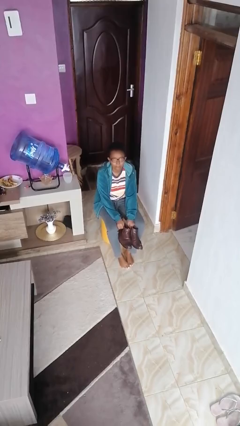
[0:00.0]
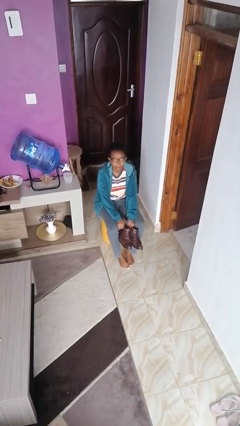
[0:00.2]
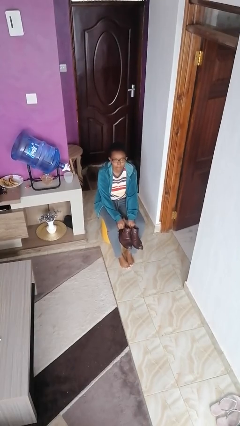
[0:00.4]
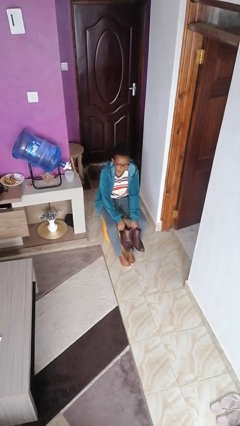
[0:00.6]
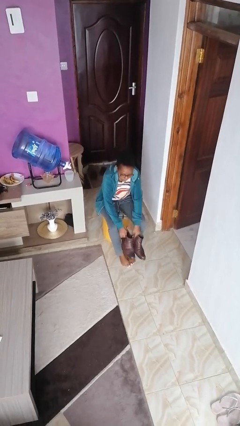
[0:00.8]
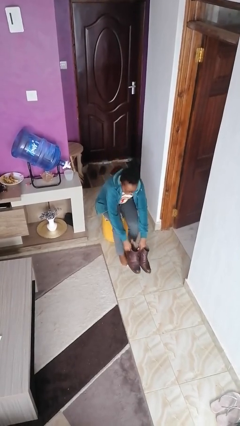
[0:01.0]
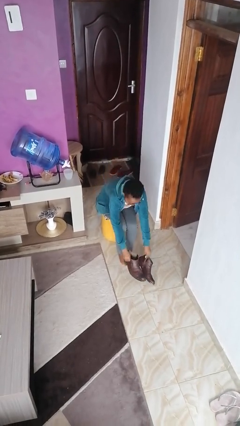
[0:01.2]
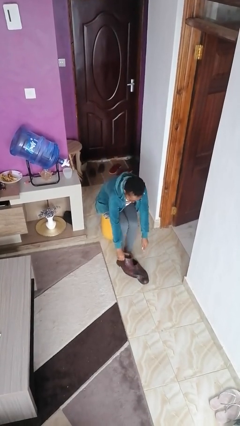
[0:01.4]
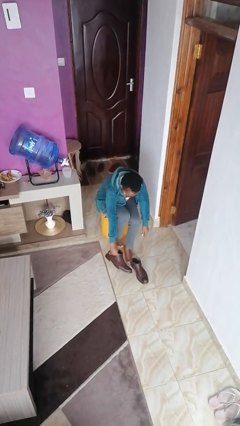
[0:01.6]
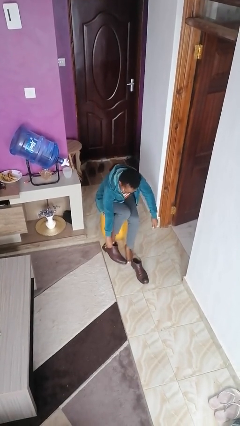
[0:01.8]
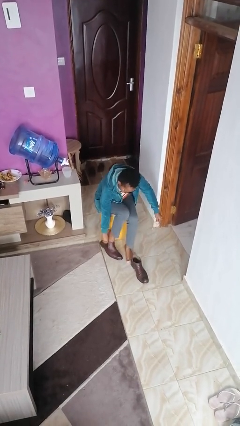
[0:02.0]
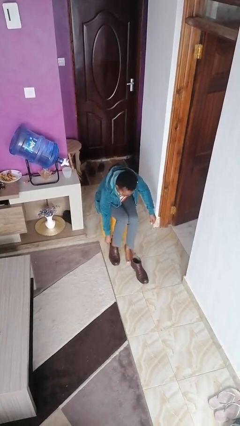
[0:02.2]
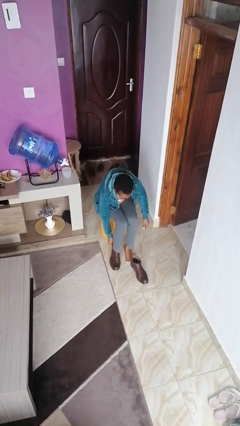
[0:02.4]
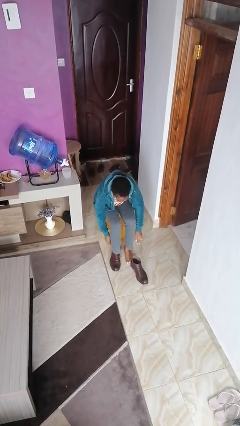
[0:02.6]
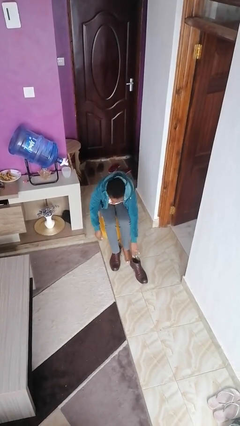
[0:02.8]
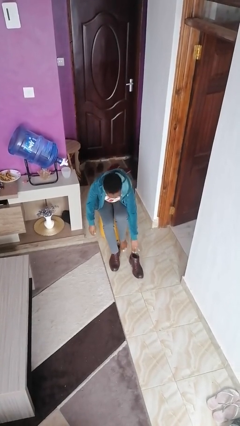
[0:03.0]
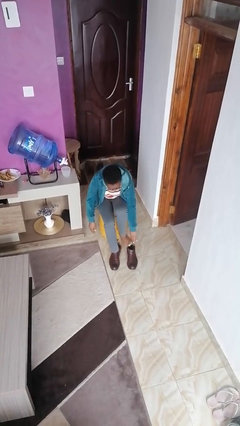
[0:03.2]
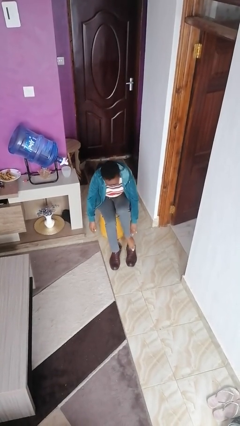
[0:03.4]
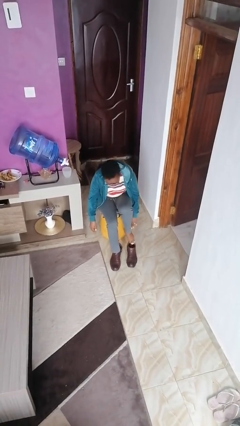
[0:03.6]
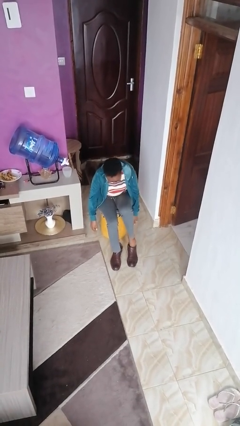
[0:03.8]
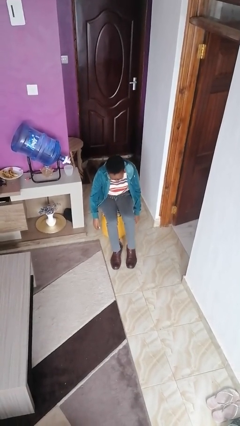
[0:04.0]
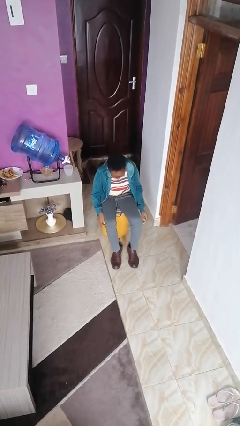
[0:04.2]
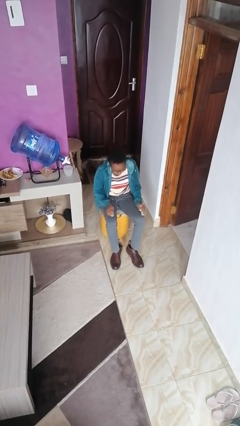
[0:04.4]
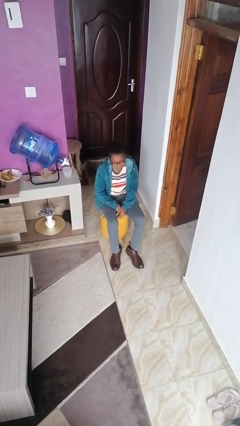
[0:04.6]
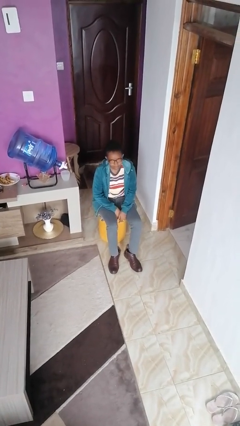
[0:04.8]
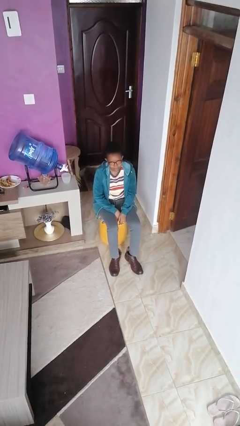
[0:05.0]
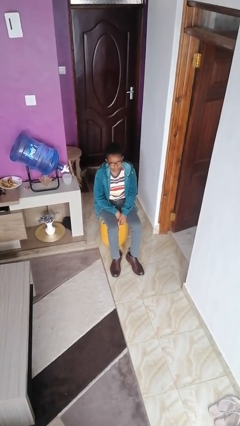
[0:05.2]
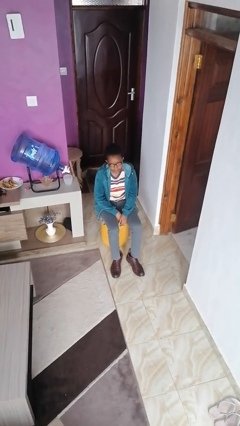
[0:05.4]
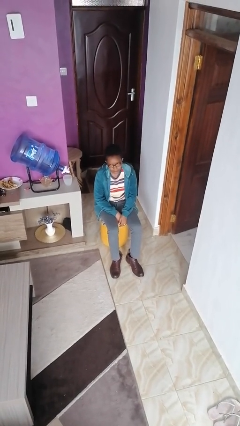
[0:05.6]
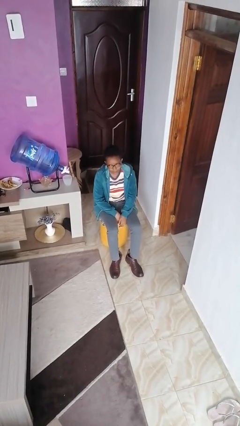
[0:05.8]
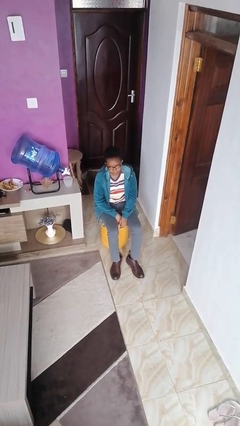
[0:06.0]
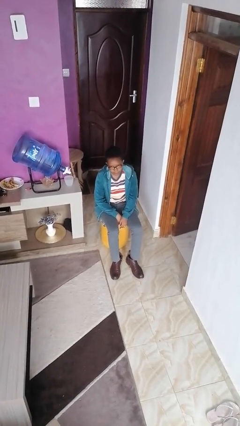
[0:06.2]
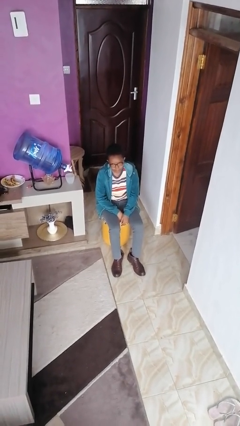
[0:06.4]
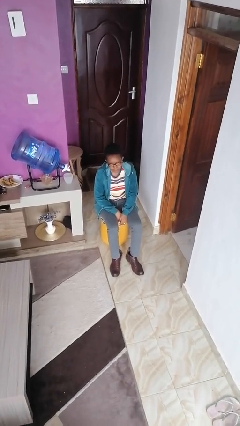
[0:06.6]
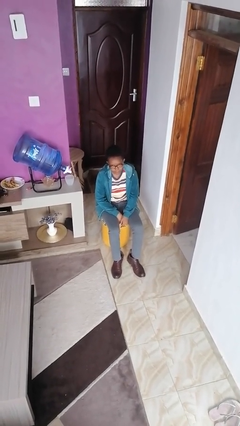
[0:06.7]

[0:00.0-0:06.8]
person puts on boots

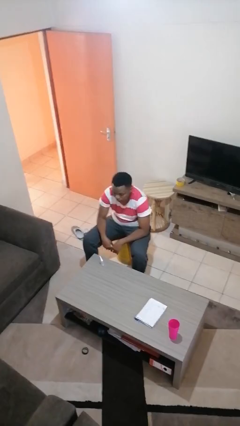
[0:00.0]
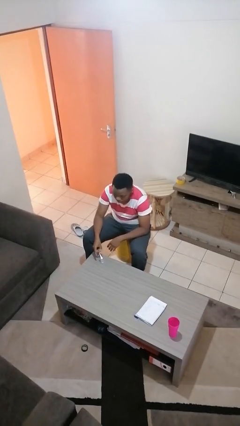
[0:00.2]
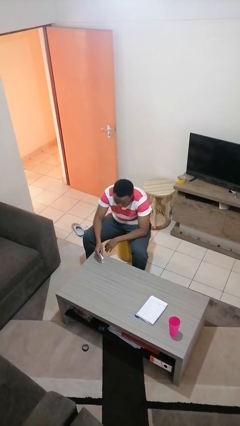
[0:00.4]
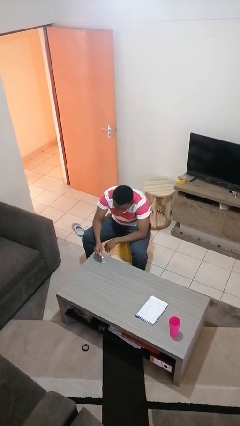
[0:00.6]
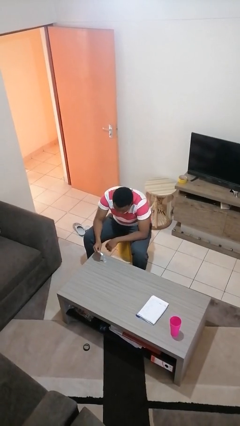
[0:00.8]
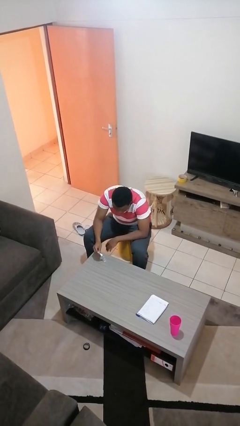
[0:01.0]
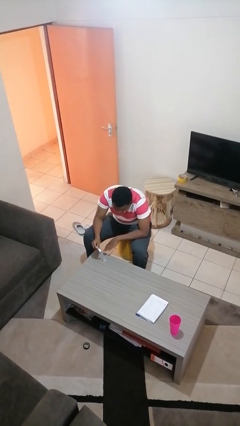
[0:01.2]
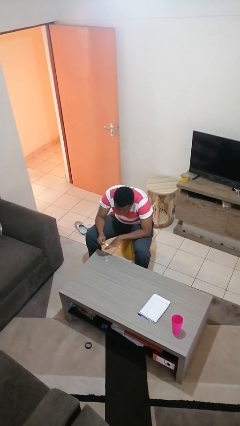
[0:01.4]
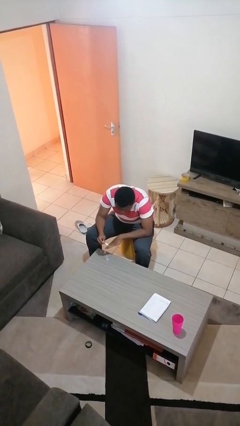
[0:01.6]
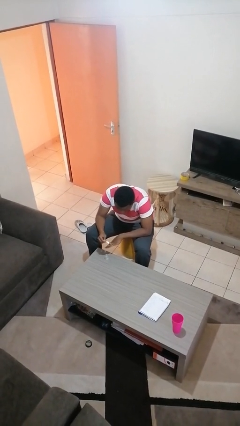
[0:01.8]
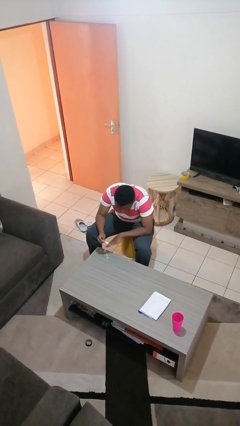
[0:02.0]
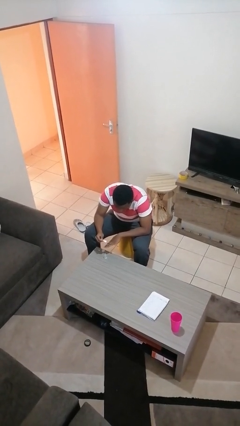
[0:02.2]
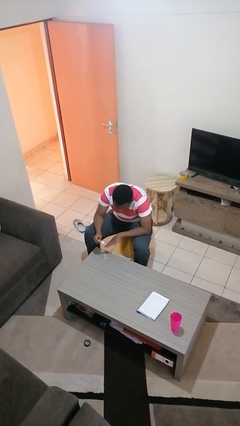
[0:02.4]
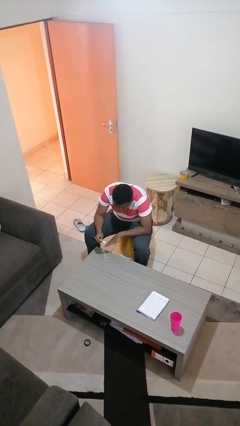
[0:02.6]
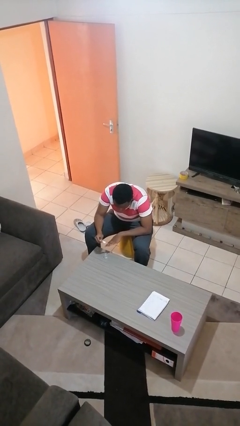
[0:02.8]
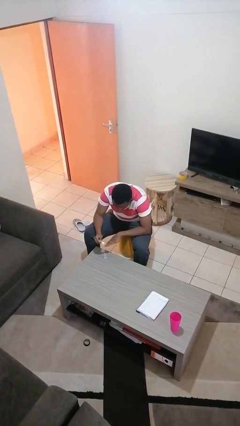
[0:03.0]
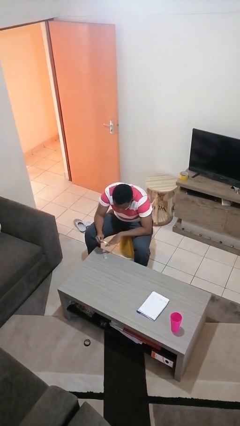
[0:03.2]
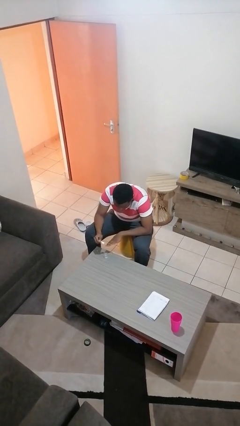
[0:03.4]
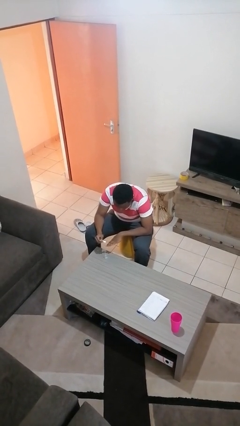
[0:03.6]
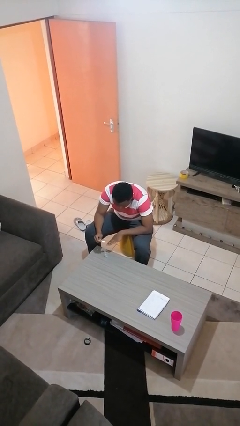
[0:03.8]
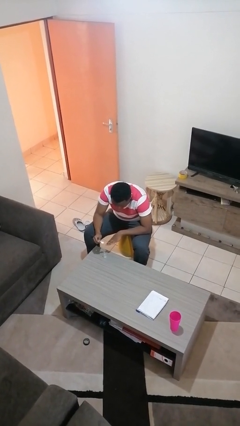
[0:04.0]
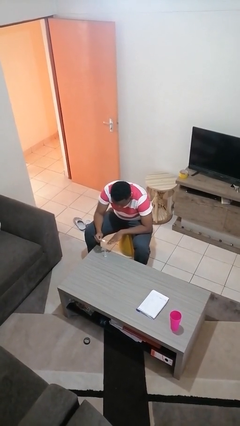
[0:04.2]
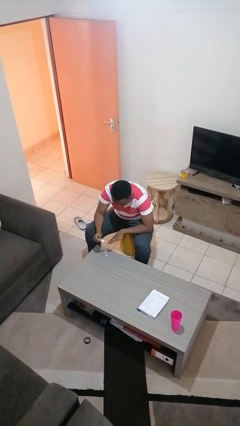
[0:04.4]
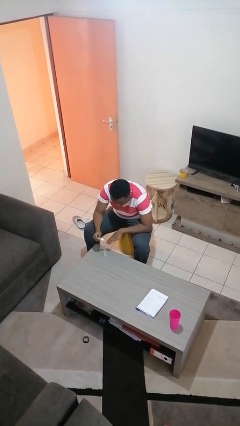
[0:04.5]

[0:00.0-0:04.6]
person paints fingernails

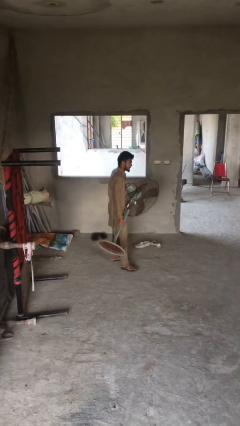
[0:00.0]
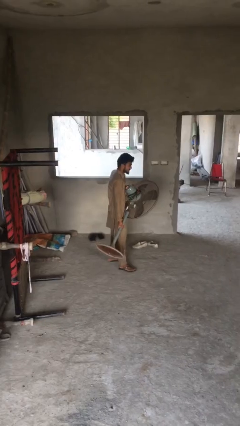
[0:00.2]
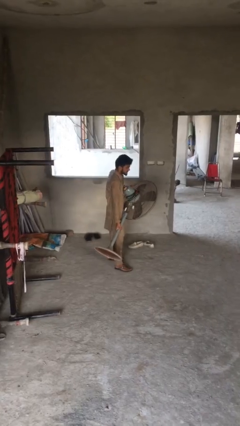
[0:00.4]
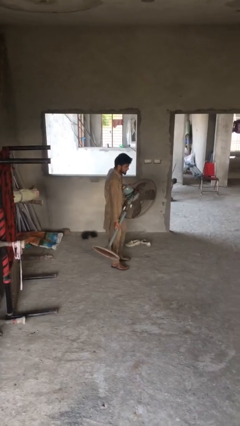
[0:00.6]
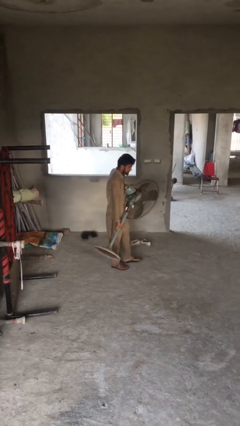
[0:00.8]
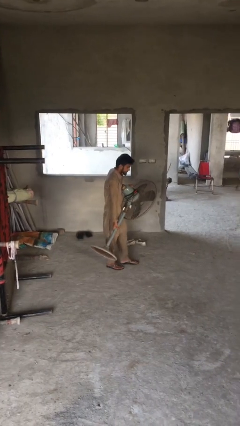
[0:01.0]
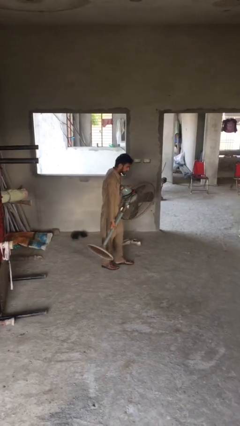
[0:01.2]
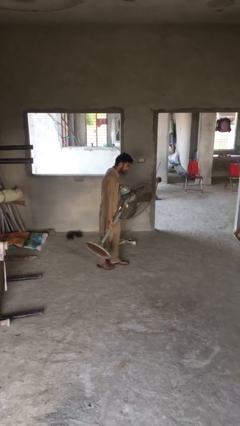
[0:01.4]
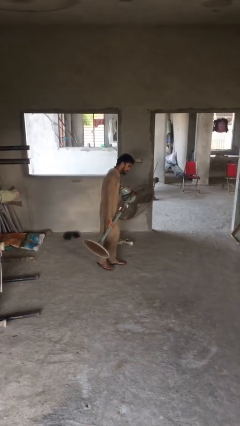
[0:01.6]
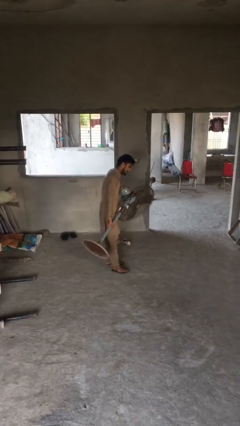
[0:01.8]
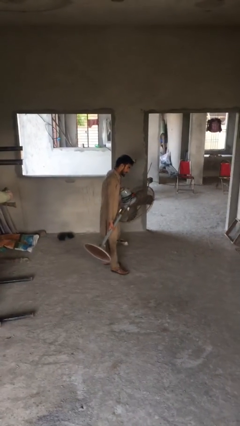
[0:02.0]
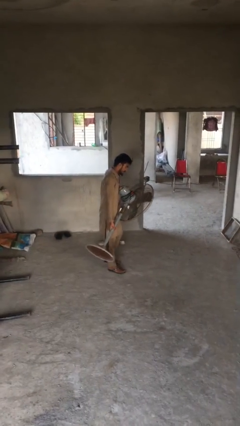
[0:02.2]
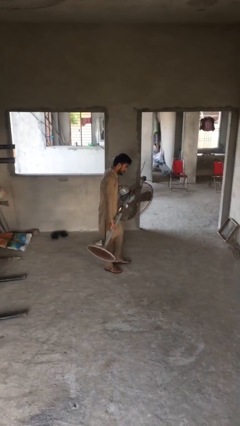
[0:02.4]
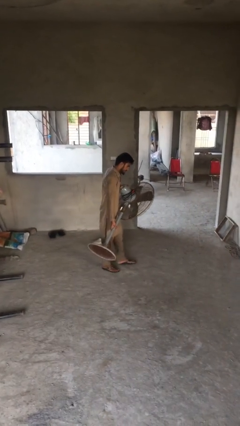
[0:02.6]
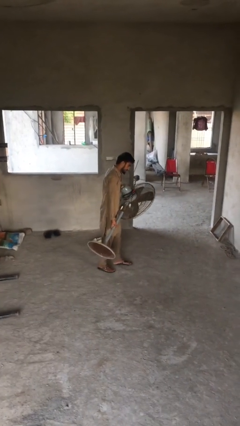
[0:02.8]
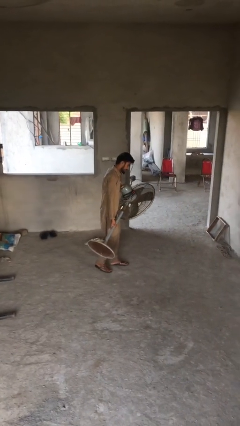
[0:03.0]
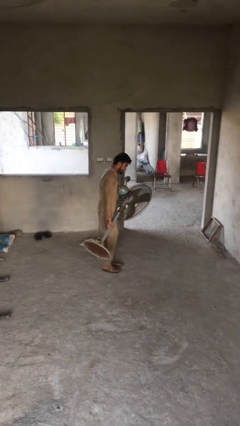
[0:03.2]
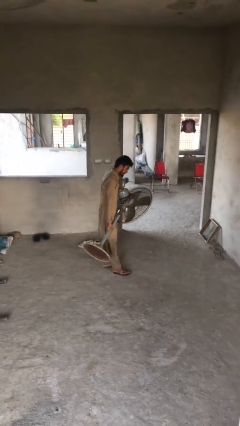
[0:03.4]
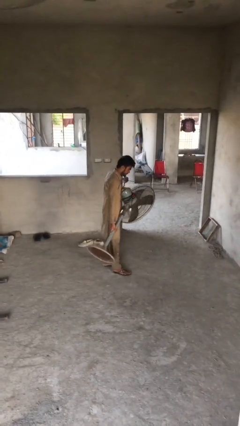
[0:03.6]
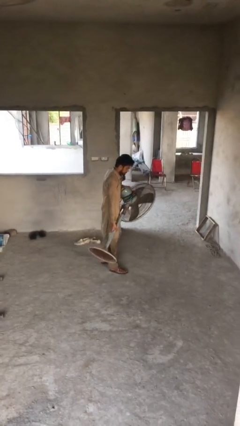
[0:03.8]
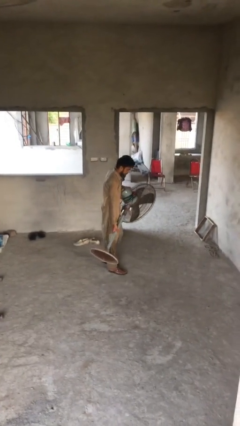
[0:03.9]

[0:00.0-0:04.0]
person carries heavy object

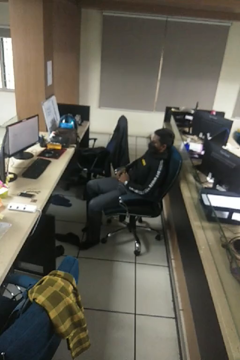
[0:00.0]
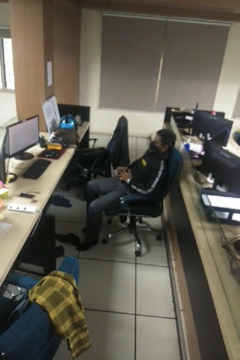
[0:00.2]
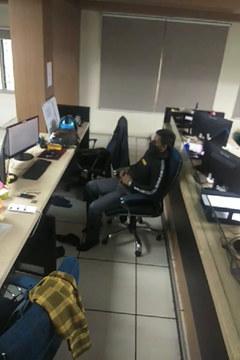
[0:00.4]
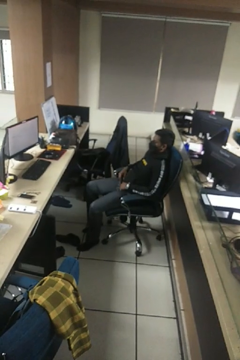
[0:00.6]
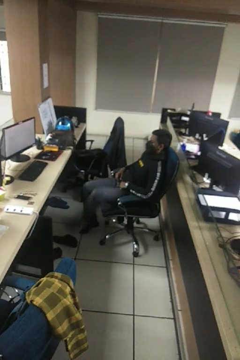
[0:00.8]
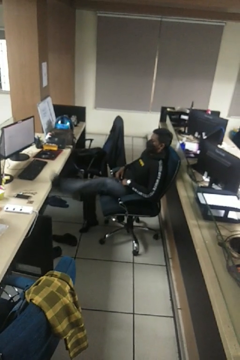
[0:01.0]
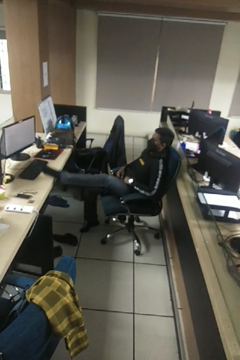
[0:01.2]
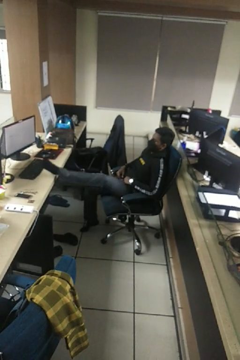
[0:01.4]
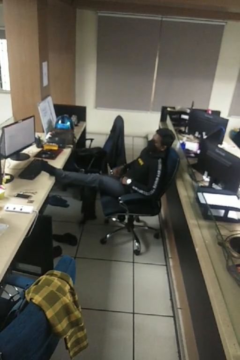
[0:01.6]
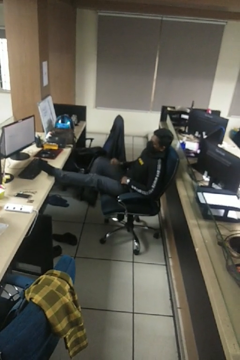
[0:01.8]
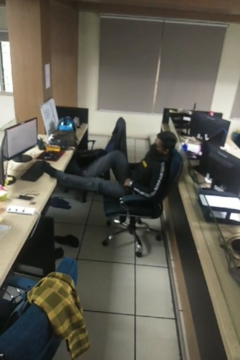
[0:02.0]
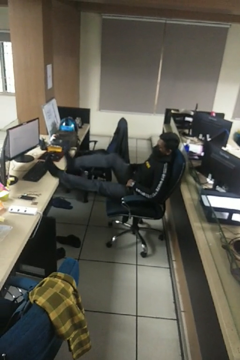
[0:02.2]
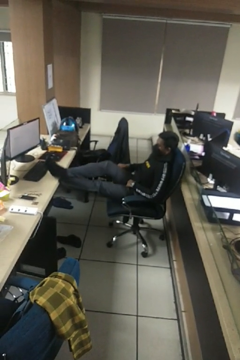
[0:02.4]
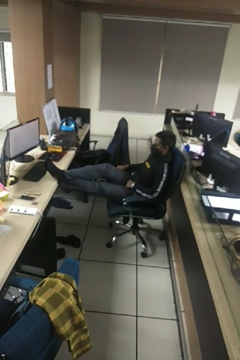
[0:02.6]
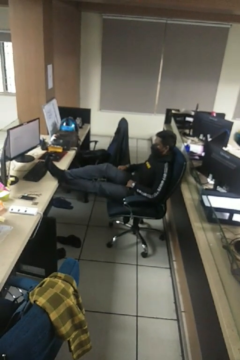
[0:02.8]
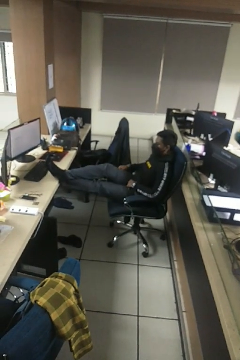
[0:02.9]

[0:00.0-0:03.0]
person puts feet up
